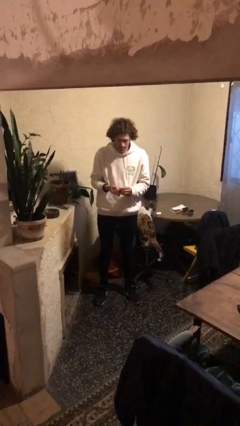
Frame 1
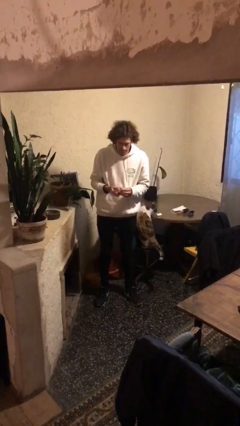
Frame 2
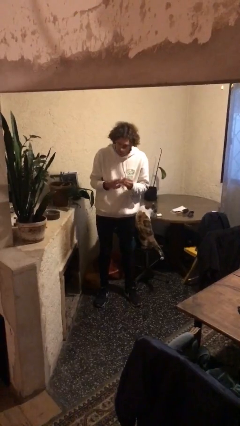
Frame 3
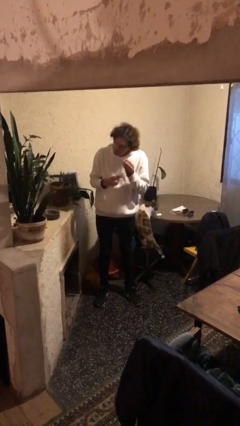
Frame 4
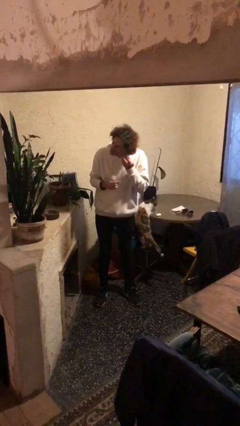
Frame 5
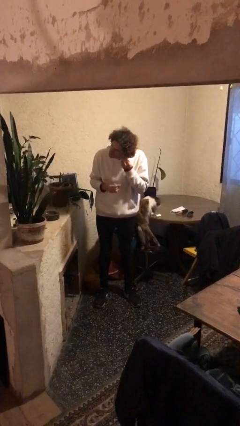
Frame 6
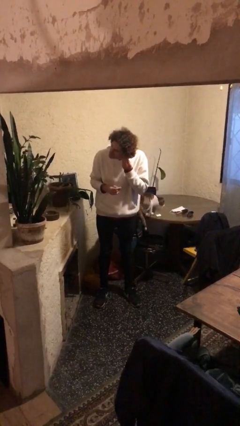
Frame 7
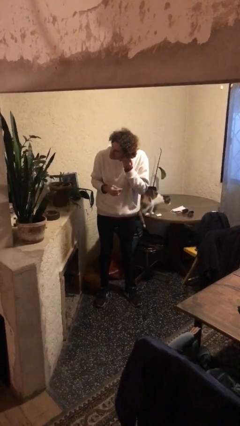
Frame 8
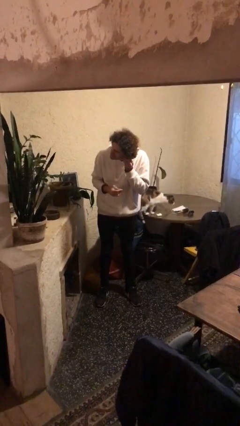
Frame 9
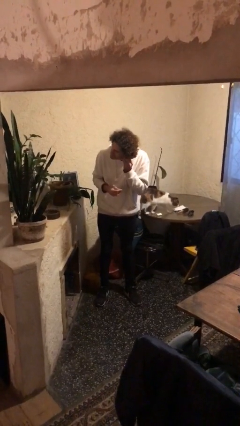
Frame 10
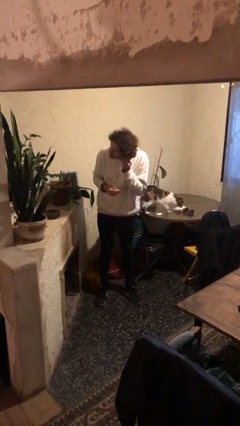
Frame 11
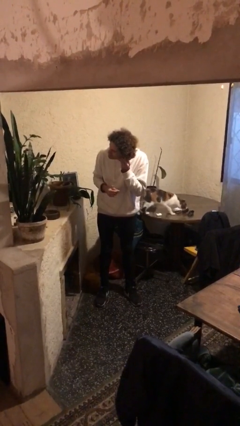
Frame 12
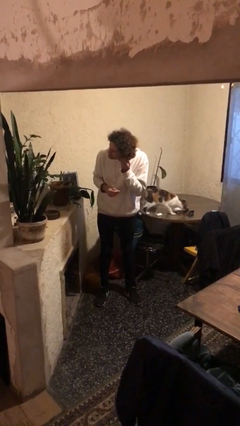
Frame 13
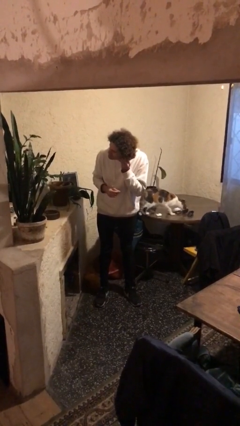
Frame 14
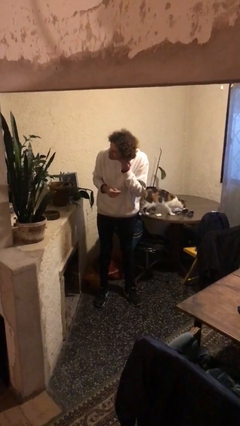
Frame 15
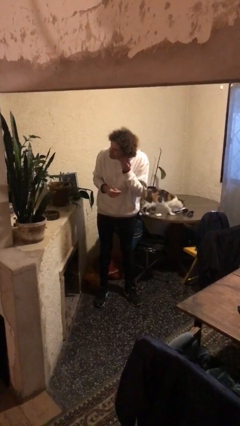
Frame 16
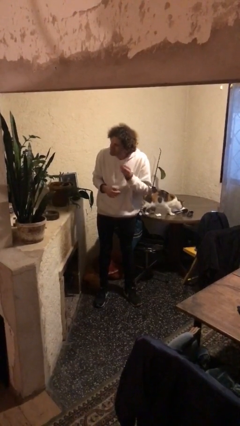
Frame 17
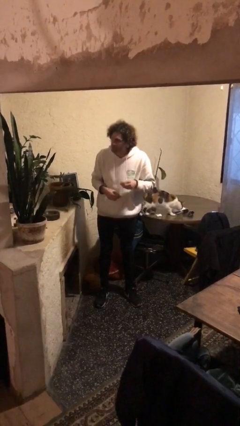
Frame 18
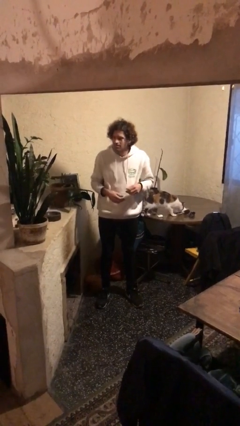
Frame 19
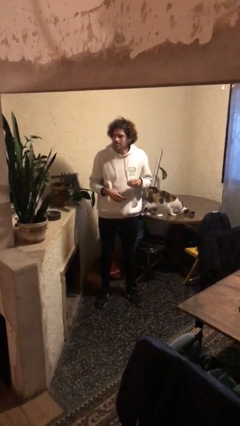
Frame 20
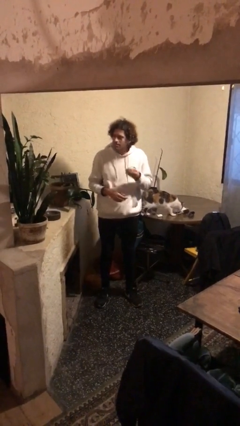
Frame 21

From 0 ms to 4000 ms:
person puts on earrings

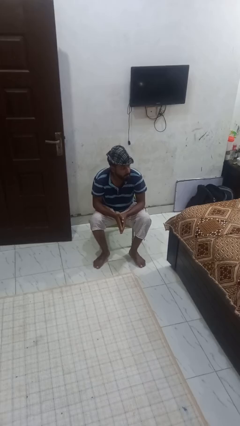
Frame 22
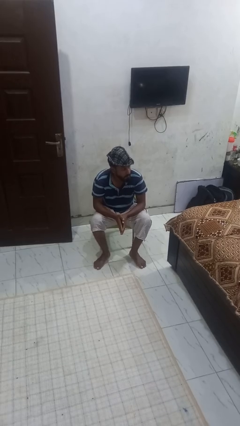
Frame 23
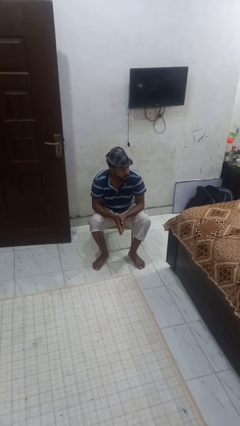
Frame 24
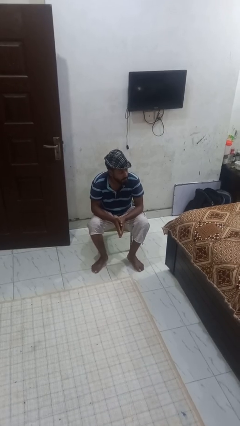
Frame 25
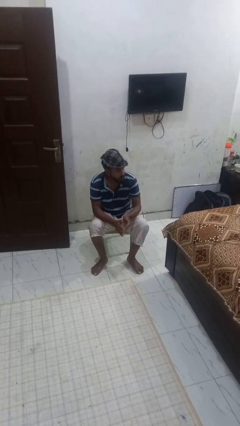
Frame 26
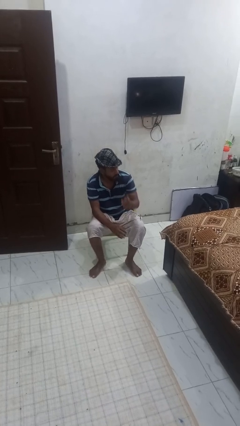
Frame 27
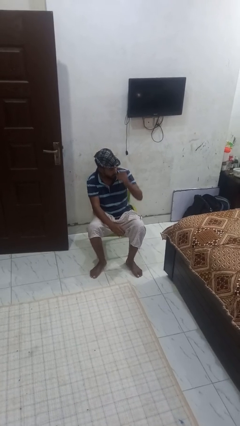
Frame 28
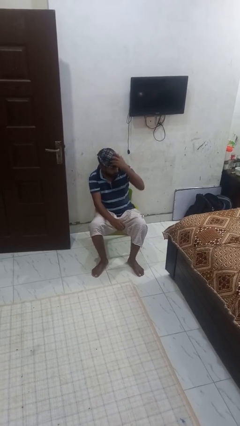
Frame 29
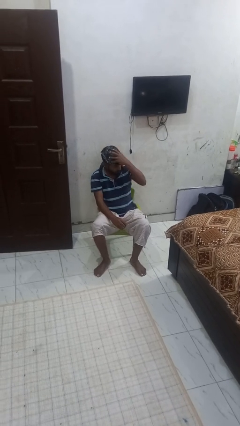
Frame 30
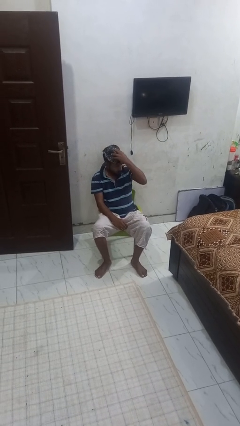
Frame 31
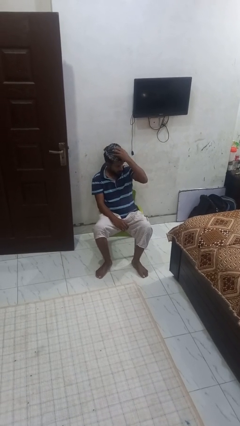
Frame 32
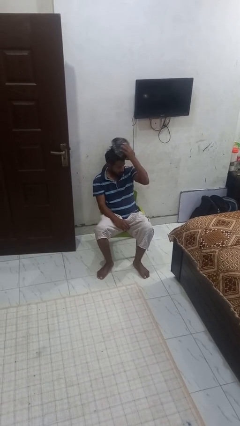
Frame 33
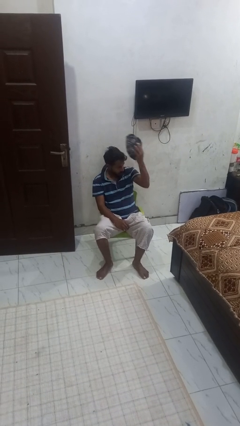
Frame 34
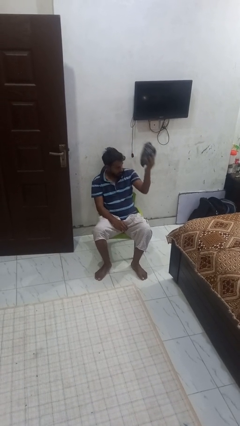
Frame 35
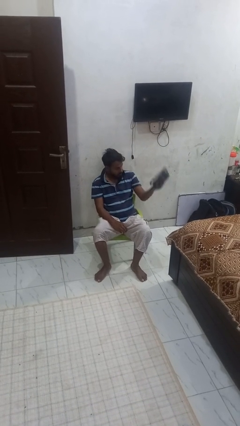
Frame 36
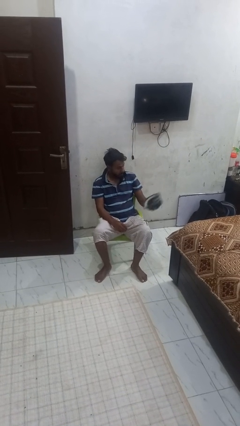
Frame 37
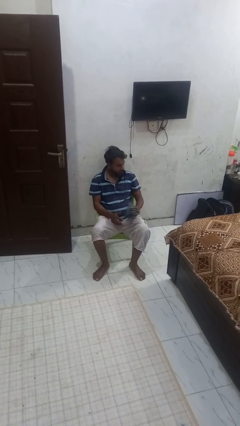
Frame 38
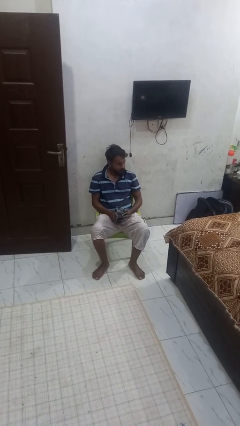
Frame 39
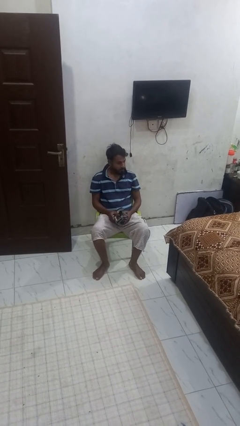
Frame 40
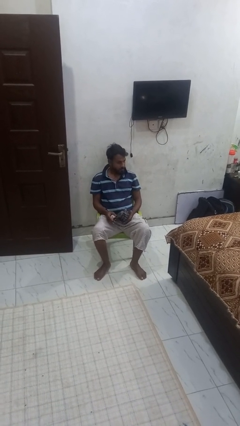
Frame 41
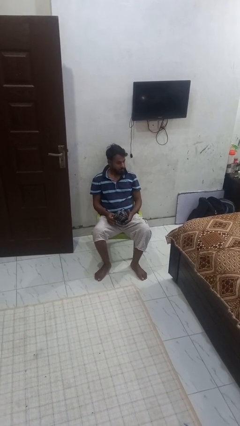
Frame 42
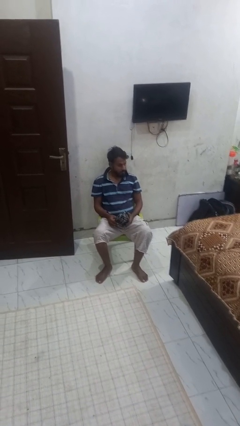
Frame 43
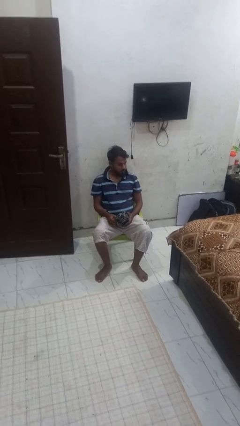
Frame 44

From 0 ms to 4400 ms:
person takes off hat

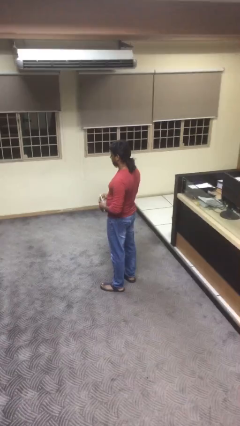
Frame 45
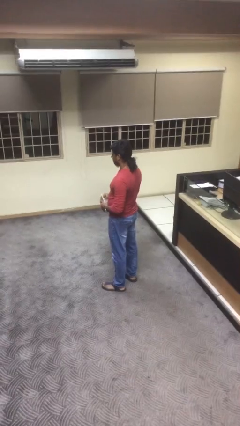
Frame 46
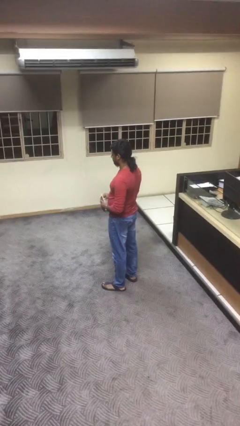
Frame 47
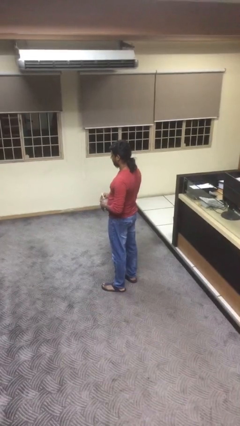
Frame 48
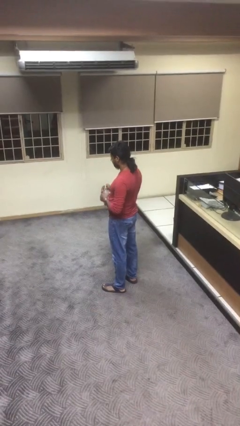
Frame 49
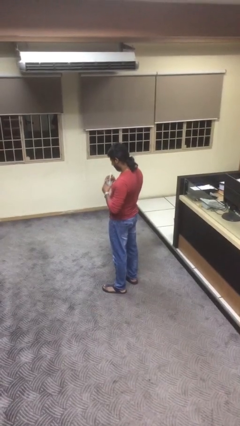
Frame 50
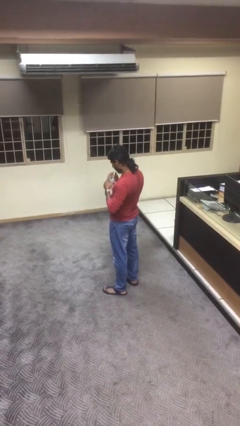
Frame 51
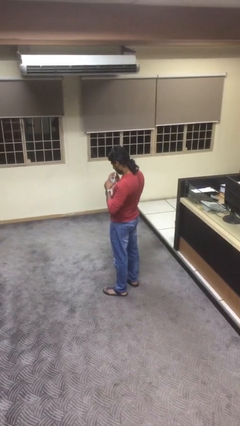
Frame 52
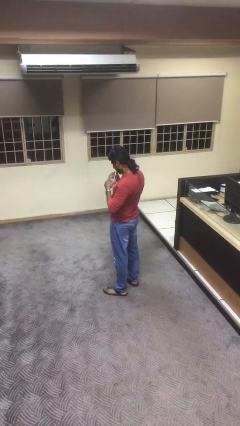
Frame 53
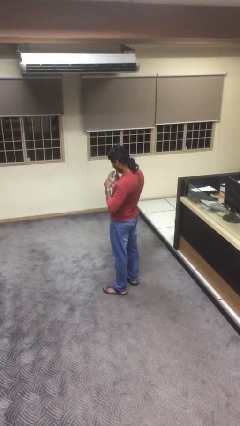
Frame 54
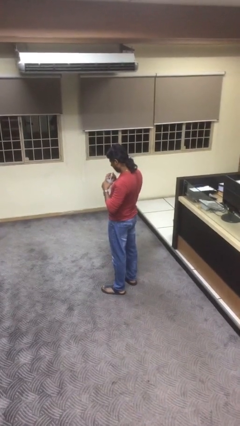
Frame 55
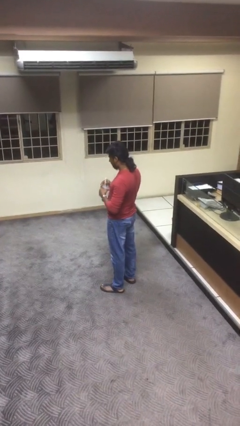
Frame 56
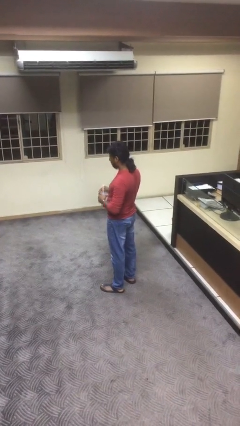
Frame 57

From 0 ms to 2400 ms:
person drinks from straw

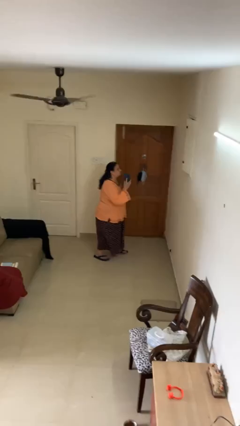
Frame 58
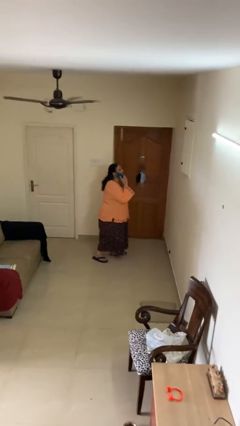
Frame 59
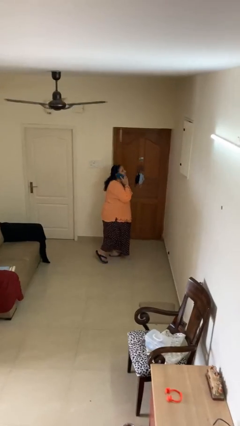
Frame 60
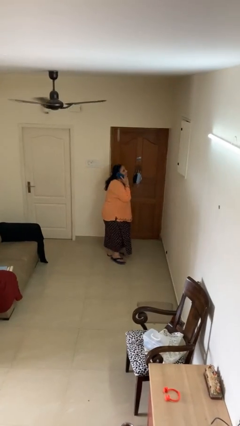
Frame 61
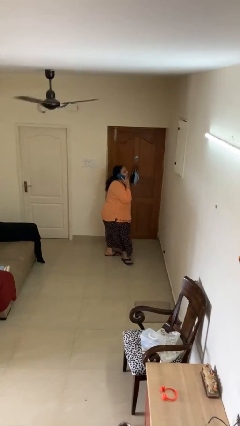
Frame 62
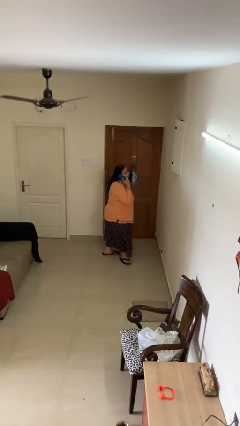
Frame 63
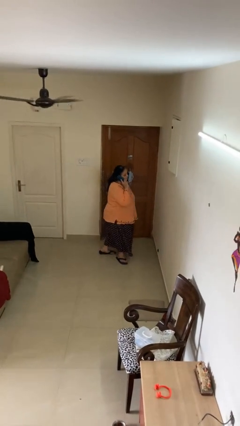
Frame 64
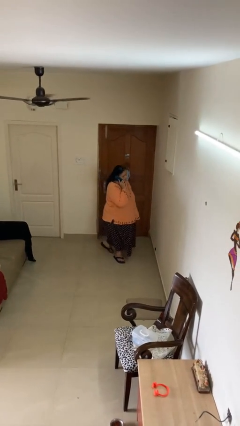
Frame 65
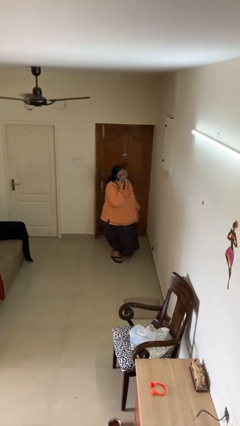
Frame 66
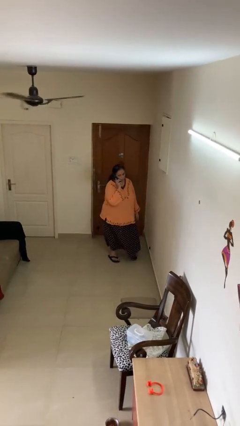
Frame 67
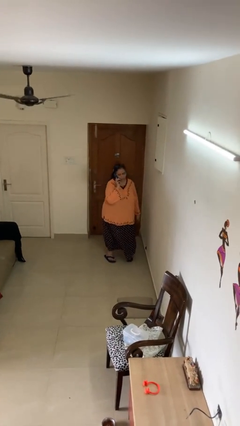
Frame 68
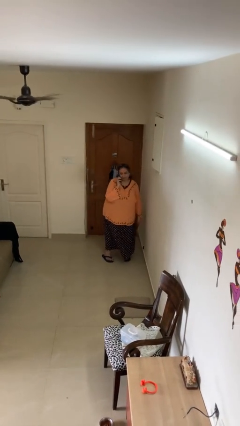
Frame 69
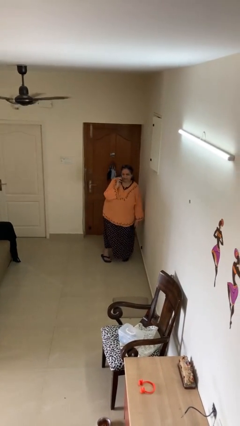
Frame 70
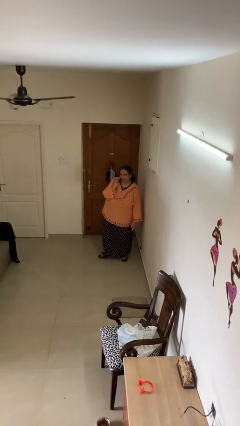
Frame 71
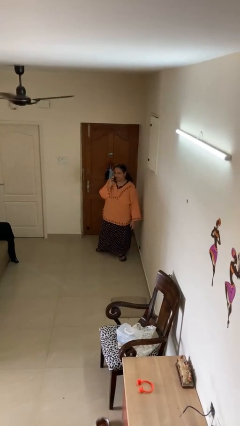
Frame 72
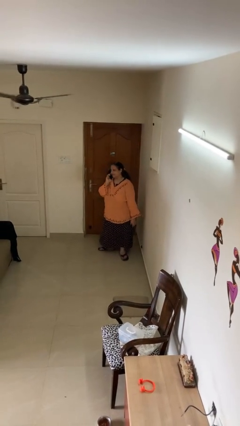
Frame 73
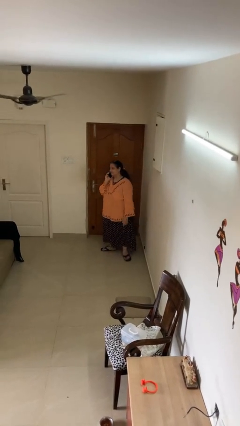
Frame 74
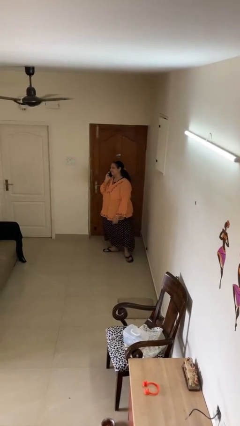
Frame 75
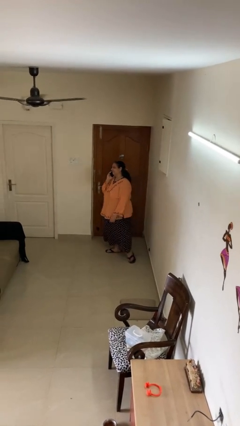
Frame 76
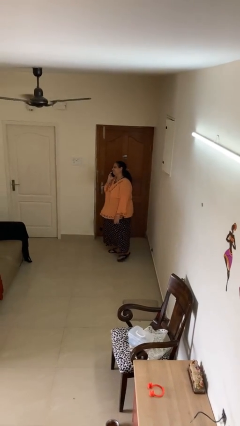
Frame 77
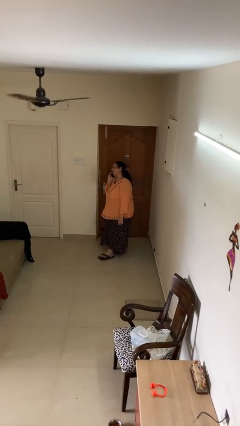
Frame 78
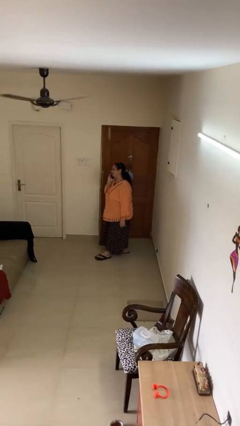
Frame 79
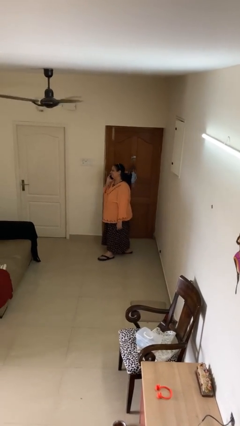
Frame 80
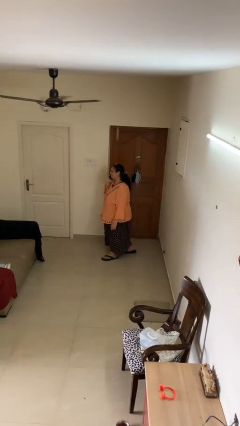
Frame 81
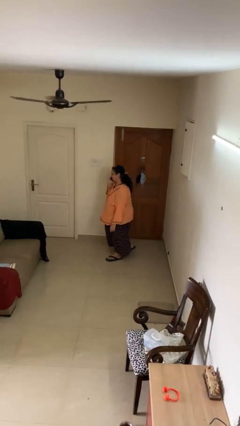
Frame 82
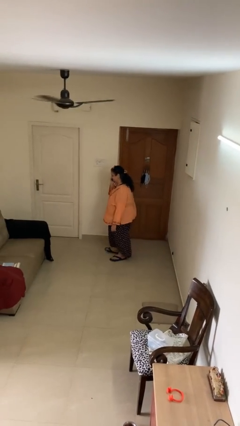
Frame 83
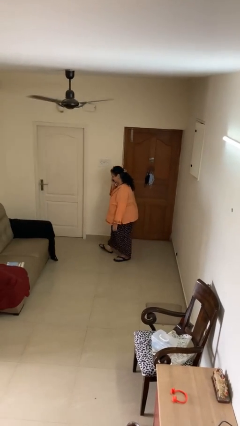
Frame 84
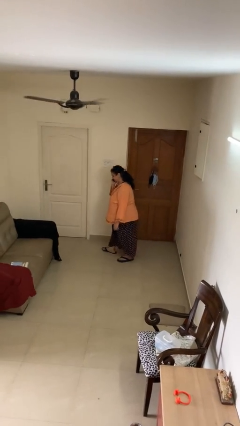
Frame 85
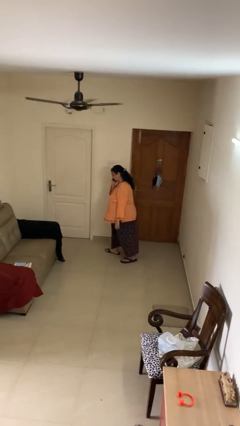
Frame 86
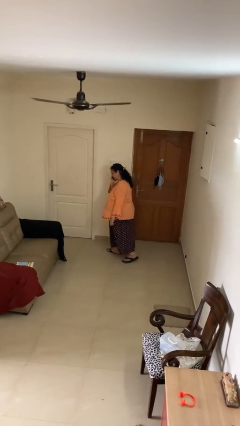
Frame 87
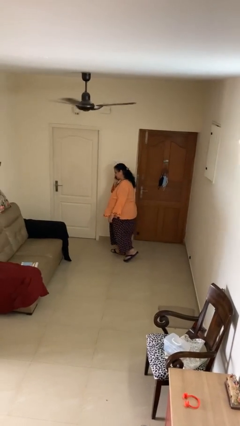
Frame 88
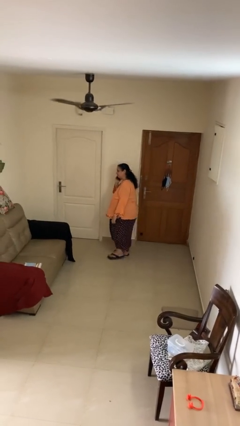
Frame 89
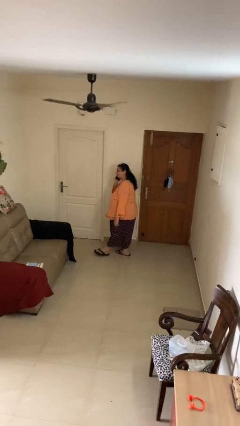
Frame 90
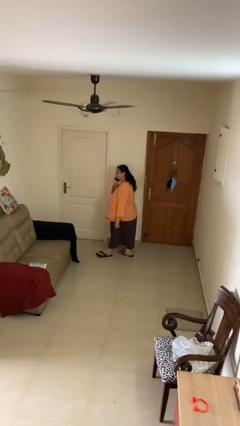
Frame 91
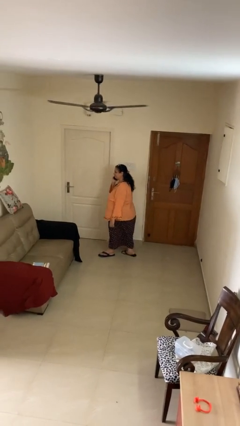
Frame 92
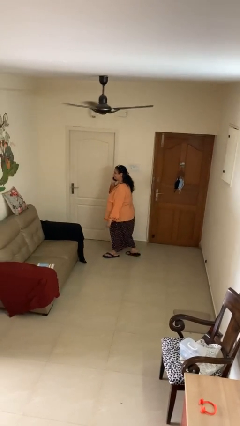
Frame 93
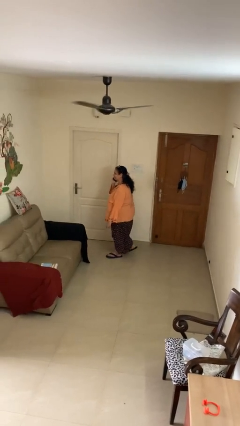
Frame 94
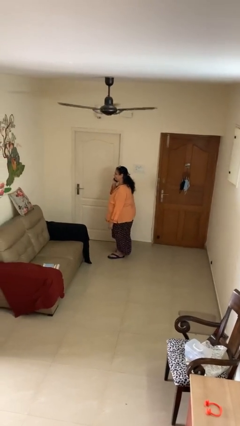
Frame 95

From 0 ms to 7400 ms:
person talks on phone
